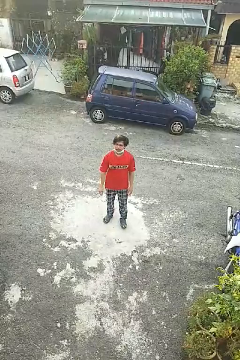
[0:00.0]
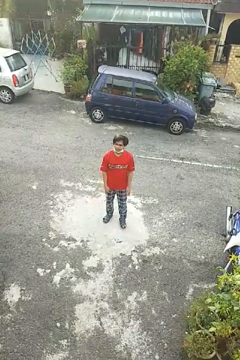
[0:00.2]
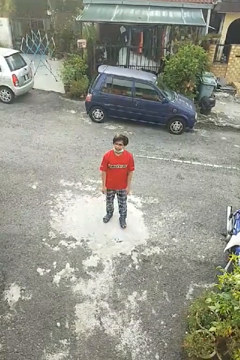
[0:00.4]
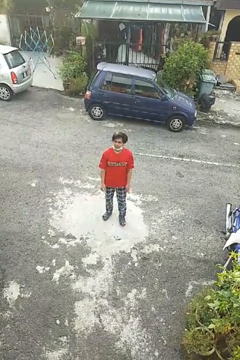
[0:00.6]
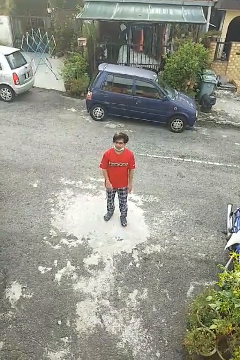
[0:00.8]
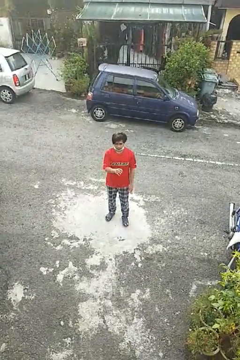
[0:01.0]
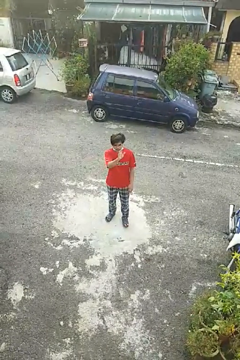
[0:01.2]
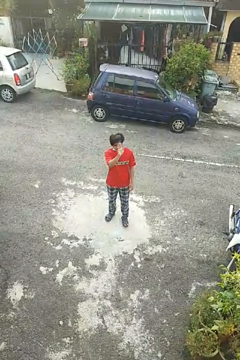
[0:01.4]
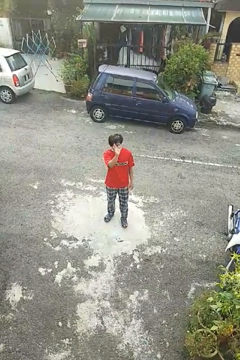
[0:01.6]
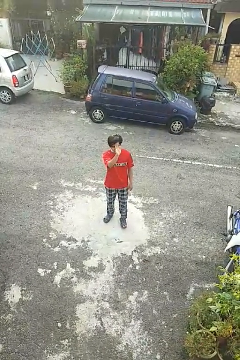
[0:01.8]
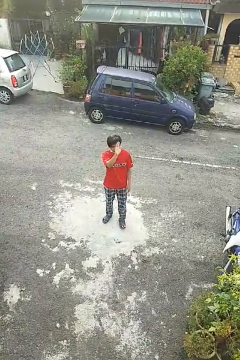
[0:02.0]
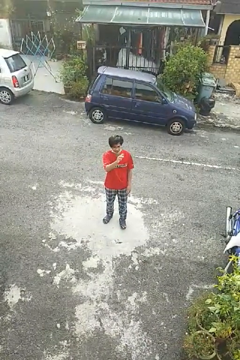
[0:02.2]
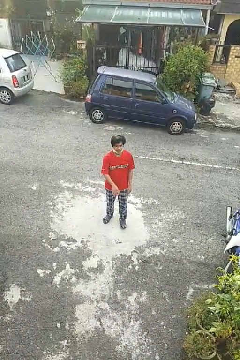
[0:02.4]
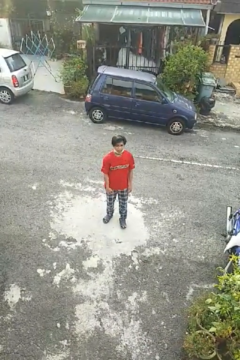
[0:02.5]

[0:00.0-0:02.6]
person waves at person

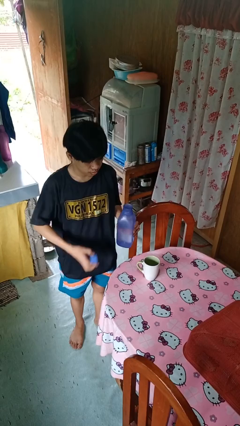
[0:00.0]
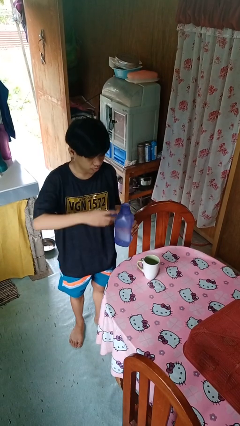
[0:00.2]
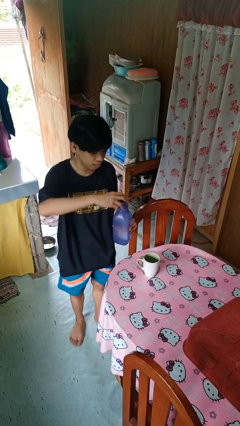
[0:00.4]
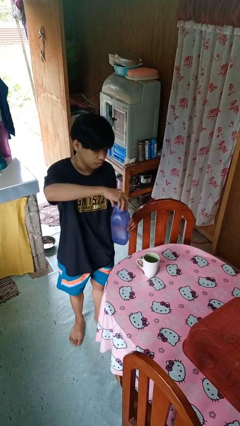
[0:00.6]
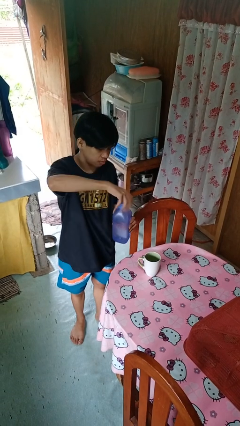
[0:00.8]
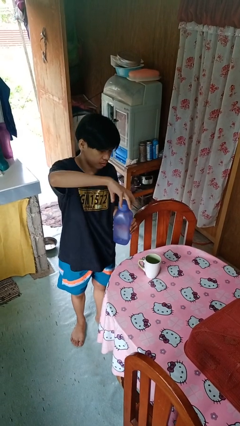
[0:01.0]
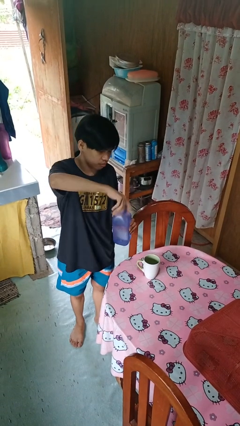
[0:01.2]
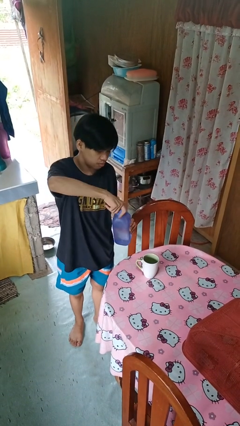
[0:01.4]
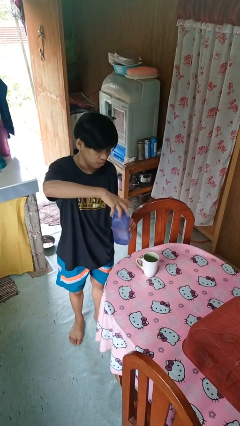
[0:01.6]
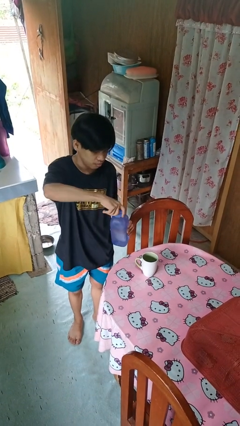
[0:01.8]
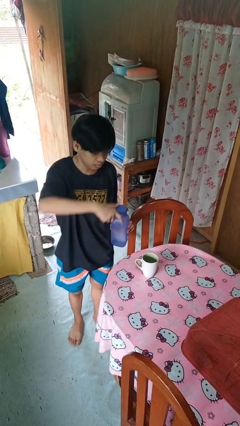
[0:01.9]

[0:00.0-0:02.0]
person screws lid to bottle

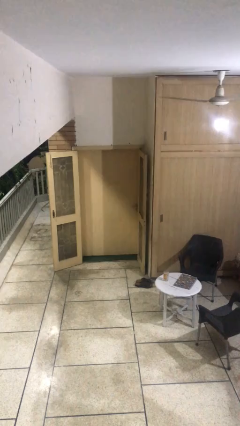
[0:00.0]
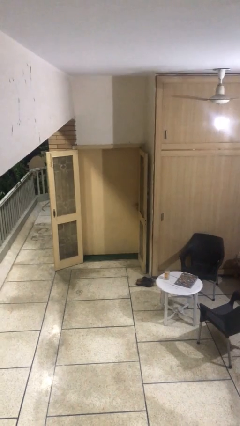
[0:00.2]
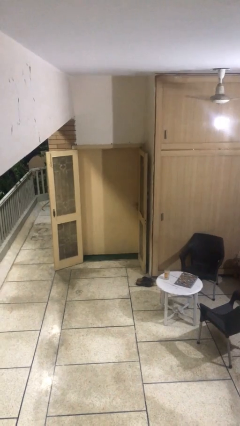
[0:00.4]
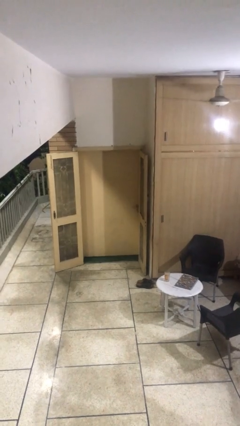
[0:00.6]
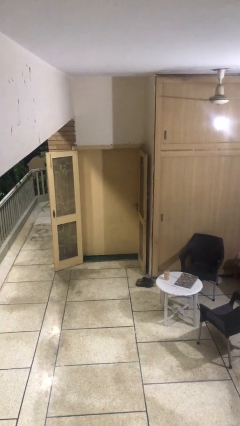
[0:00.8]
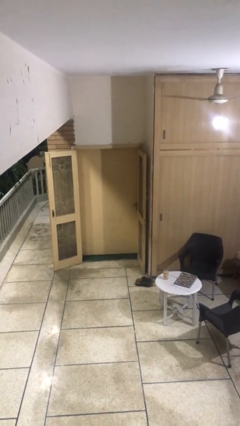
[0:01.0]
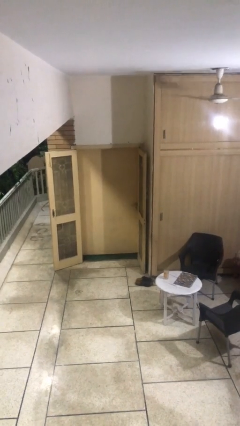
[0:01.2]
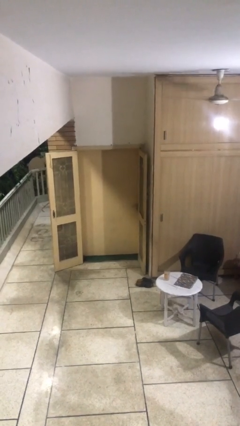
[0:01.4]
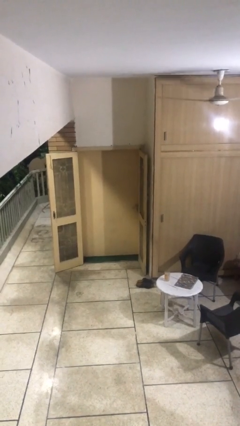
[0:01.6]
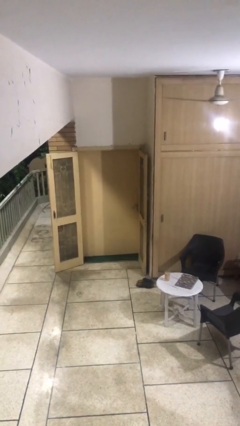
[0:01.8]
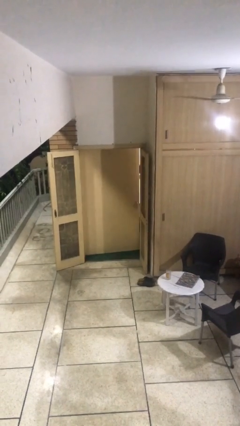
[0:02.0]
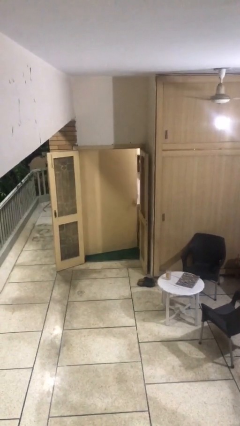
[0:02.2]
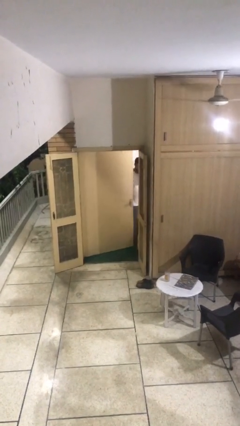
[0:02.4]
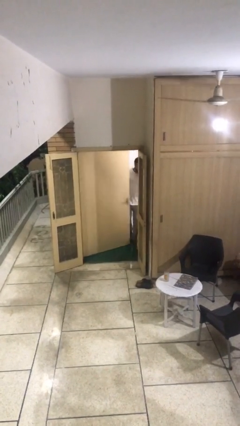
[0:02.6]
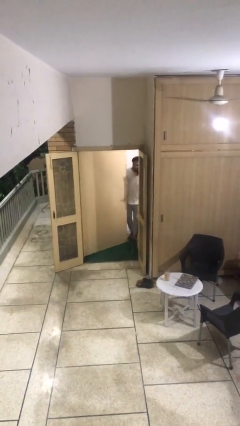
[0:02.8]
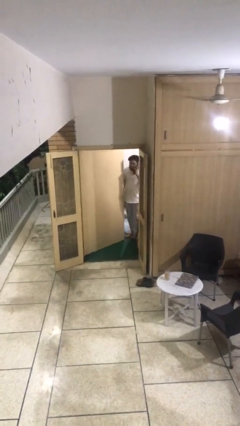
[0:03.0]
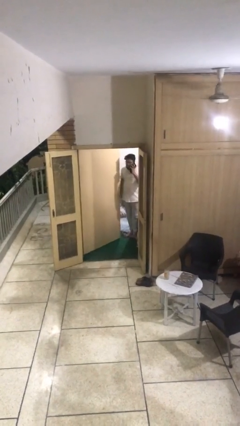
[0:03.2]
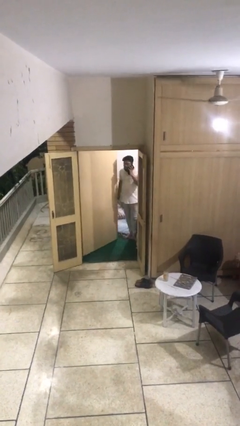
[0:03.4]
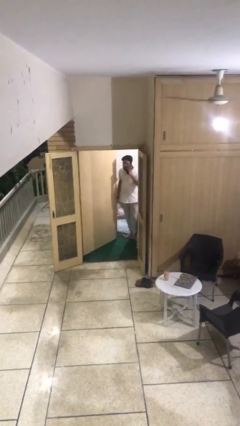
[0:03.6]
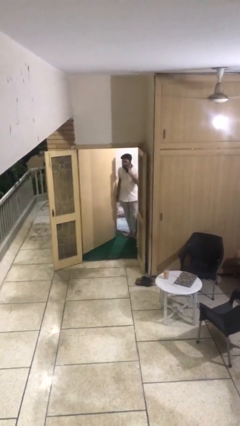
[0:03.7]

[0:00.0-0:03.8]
person opens facility door

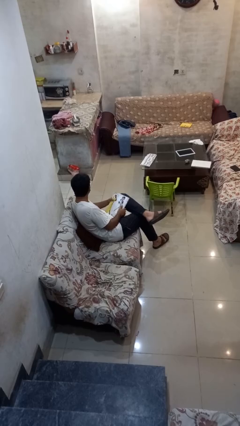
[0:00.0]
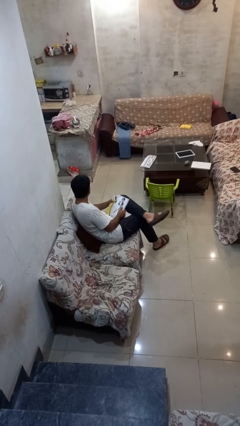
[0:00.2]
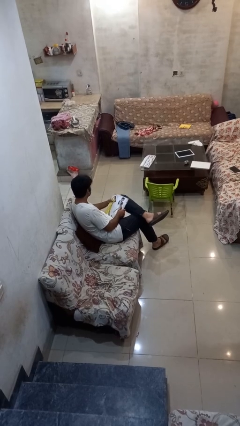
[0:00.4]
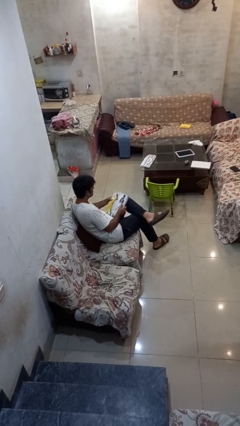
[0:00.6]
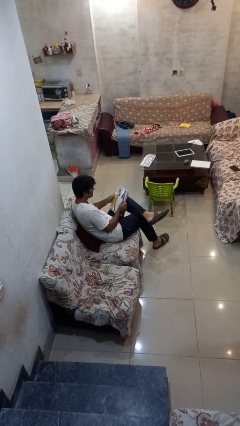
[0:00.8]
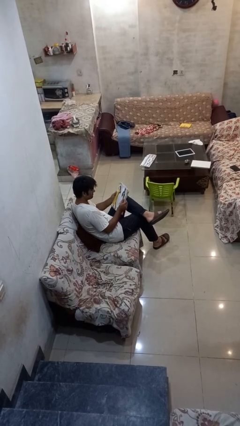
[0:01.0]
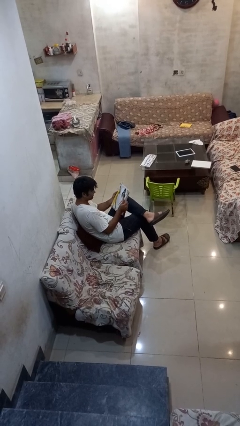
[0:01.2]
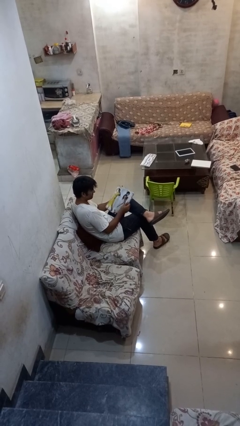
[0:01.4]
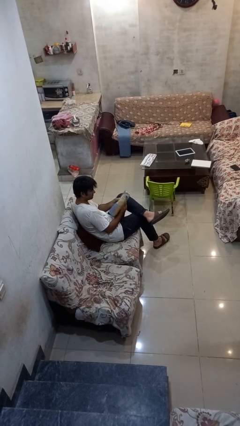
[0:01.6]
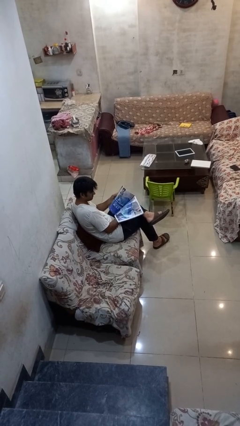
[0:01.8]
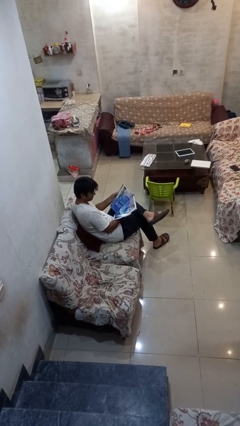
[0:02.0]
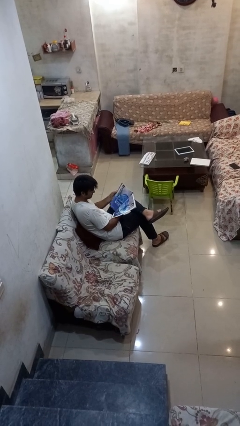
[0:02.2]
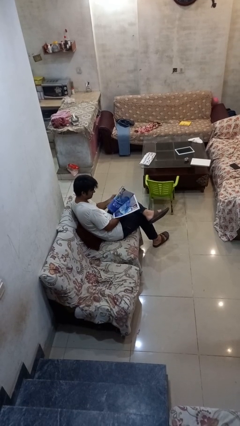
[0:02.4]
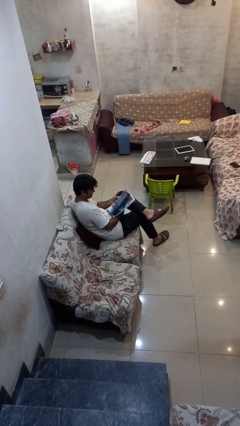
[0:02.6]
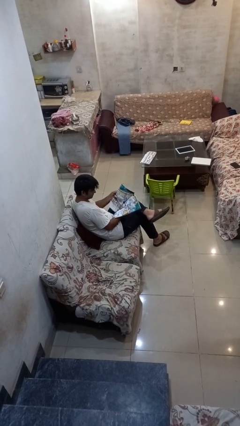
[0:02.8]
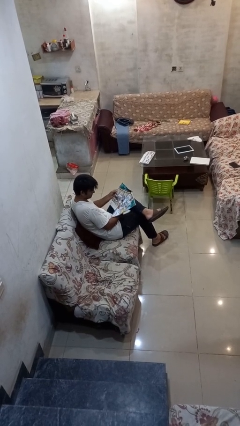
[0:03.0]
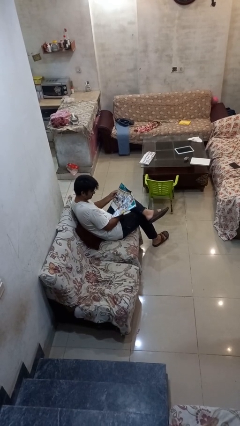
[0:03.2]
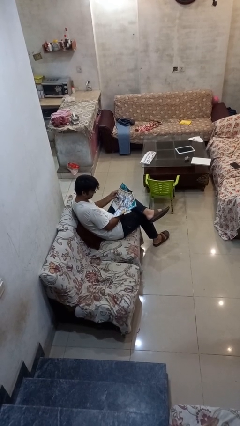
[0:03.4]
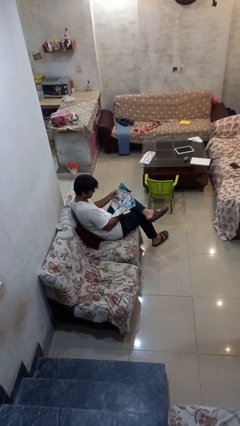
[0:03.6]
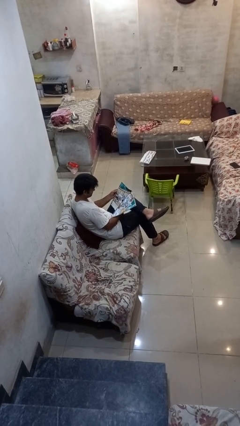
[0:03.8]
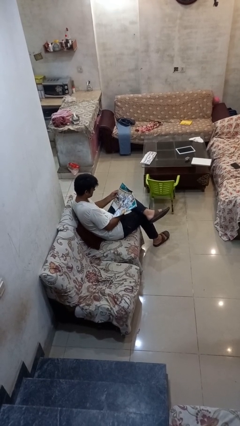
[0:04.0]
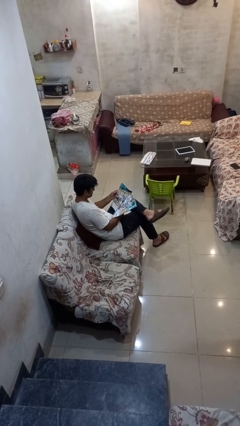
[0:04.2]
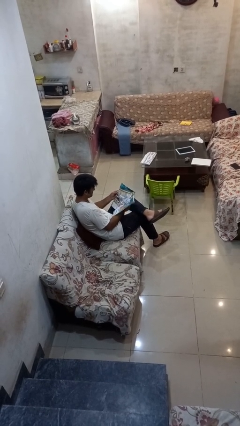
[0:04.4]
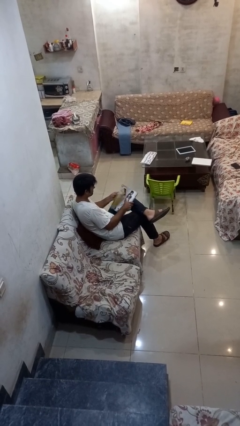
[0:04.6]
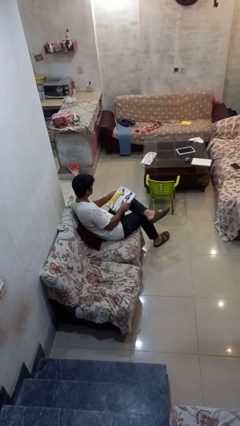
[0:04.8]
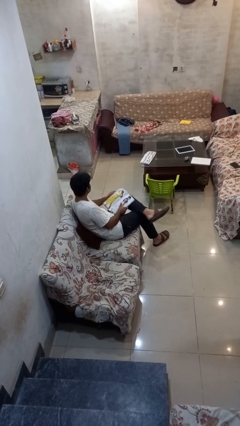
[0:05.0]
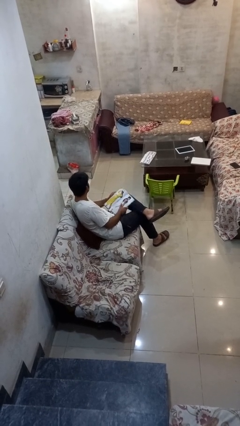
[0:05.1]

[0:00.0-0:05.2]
person reads magazine

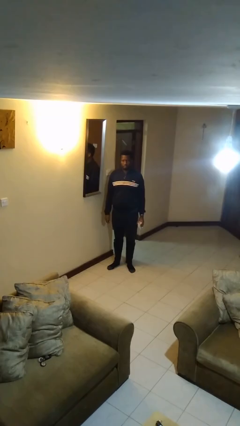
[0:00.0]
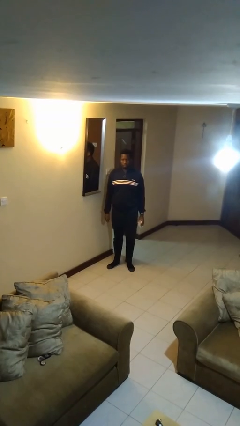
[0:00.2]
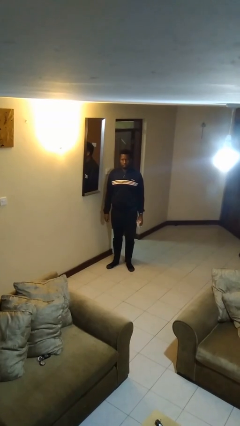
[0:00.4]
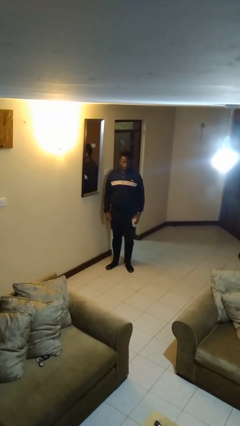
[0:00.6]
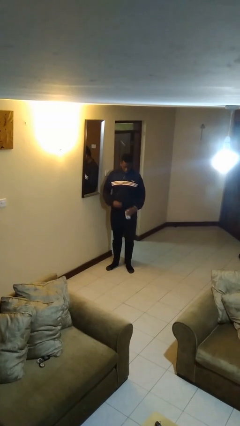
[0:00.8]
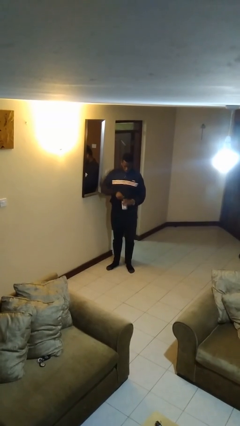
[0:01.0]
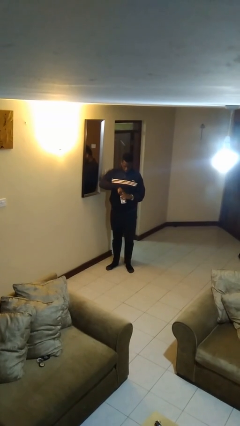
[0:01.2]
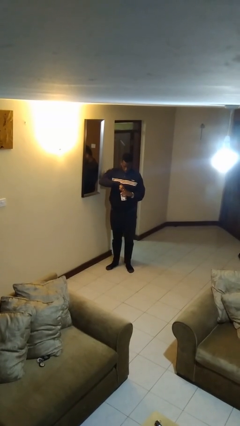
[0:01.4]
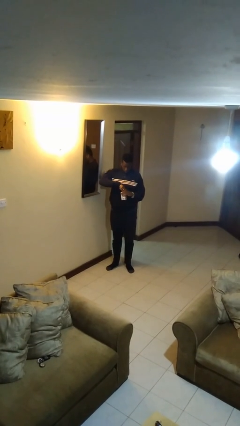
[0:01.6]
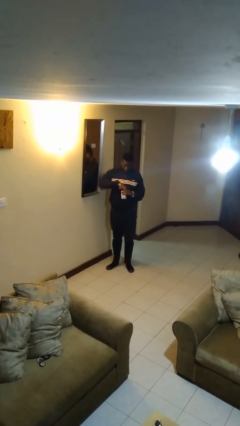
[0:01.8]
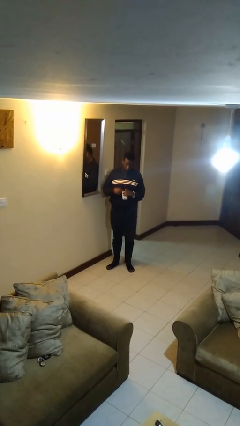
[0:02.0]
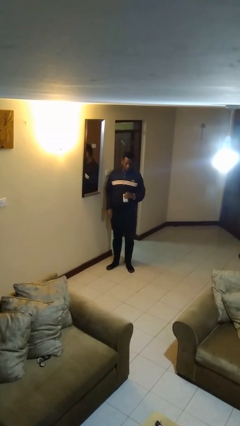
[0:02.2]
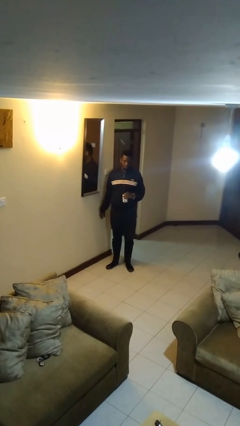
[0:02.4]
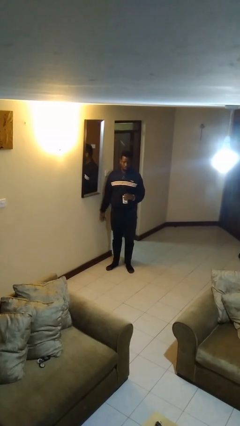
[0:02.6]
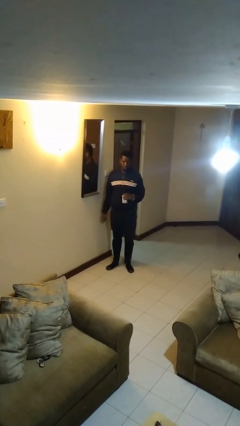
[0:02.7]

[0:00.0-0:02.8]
person opens beverage can

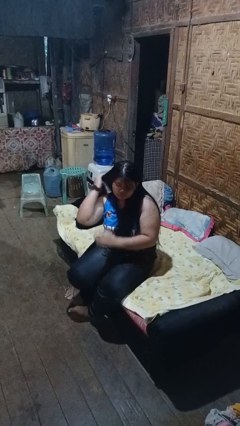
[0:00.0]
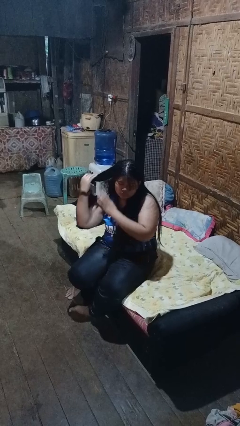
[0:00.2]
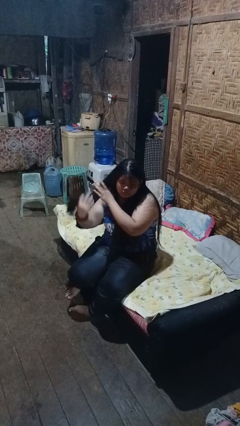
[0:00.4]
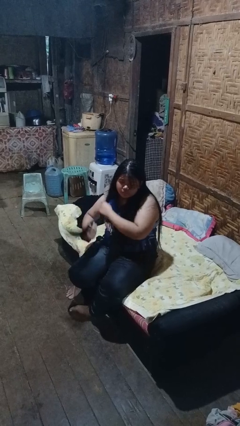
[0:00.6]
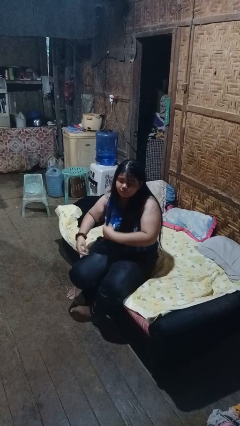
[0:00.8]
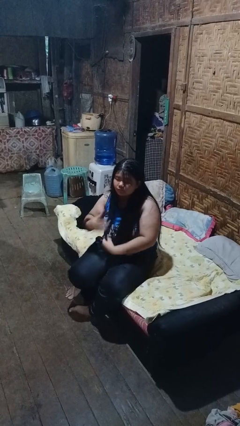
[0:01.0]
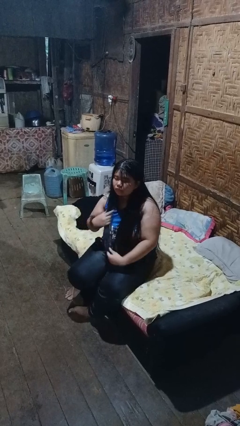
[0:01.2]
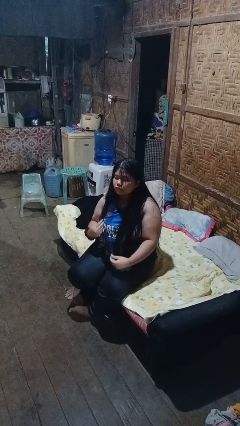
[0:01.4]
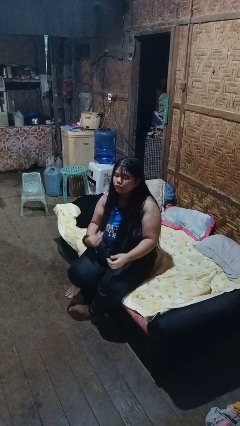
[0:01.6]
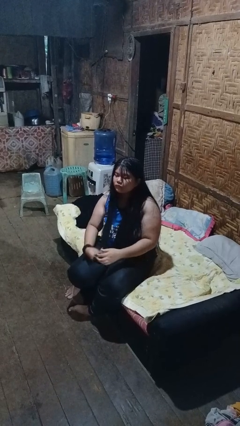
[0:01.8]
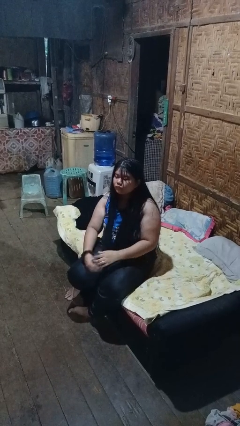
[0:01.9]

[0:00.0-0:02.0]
person strokes hair
